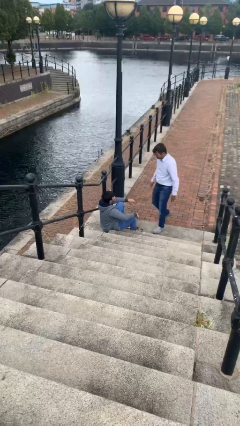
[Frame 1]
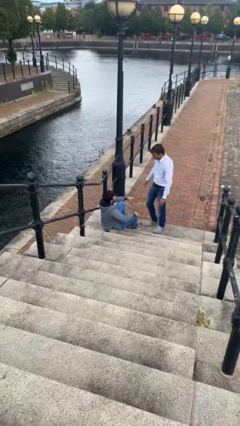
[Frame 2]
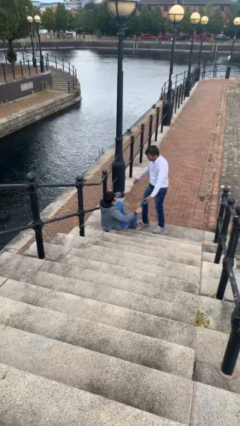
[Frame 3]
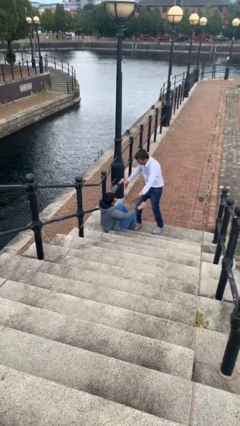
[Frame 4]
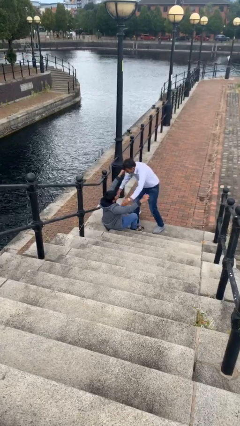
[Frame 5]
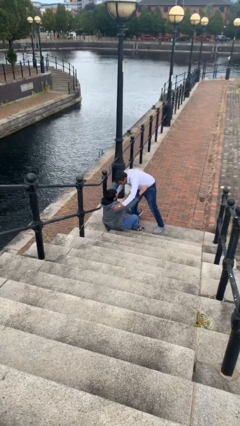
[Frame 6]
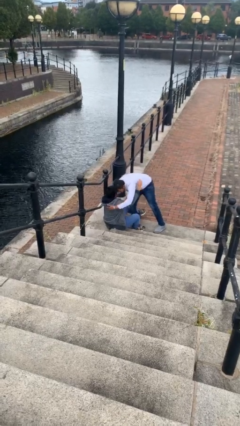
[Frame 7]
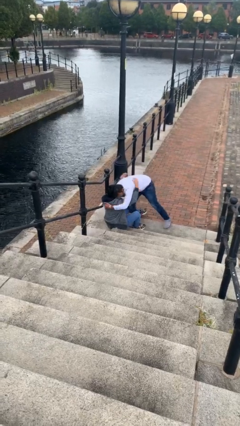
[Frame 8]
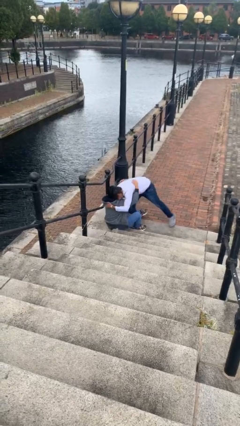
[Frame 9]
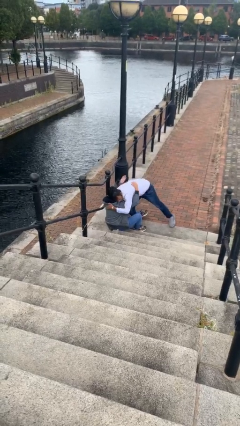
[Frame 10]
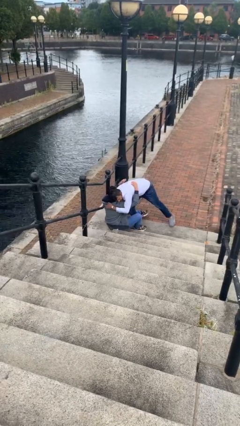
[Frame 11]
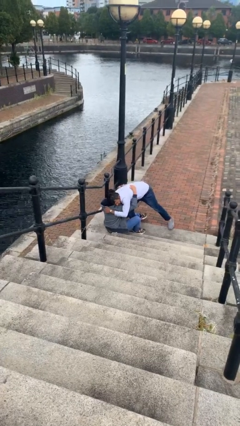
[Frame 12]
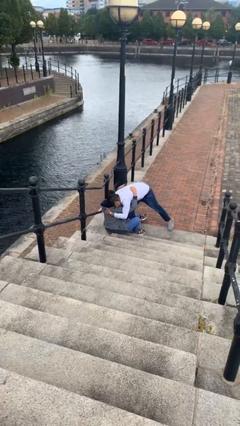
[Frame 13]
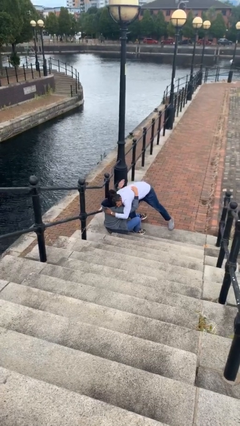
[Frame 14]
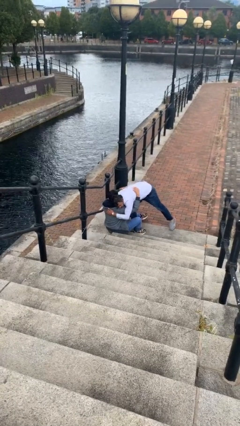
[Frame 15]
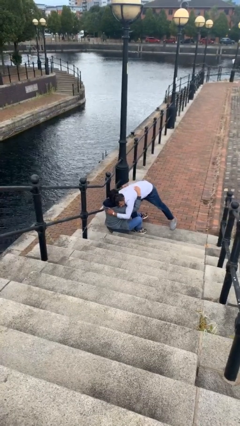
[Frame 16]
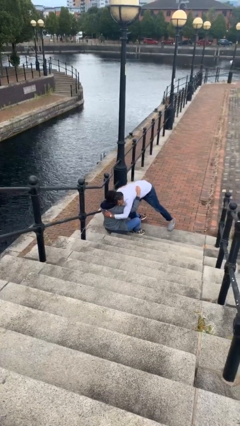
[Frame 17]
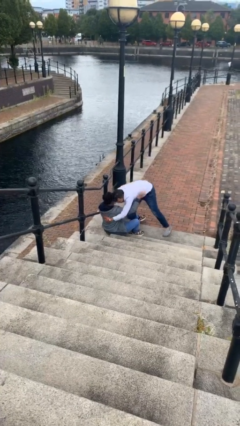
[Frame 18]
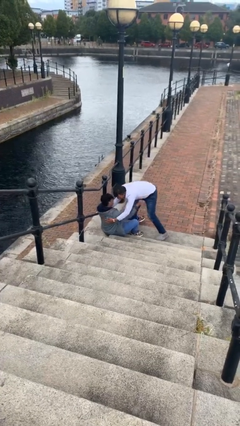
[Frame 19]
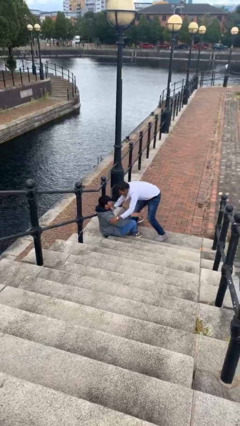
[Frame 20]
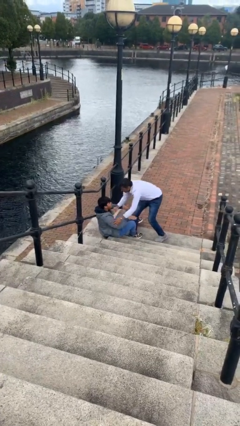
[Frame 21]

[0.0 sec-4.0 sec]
person embraces person

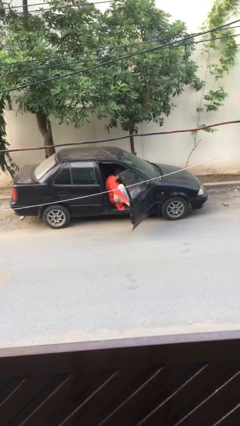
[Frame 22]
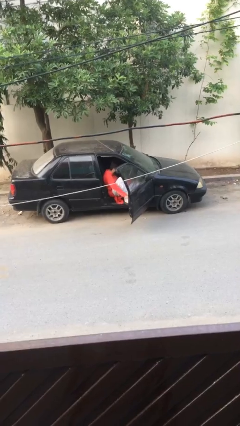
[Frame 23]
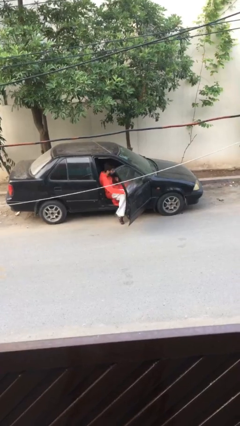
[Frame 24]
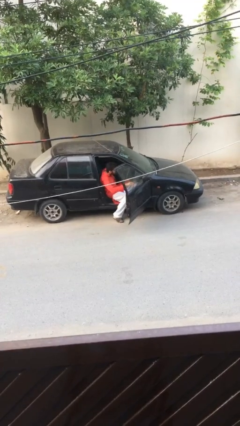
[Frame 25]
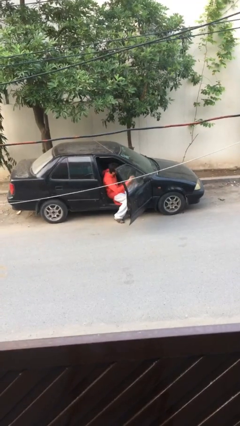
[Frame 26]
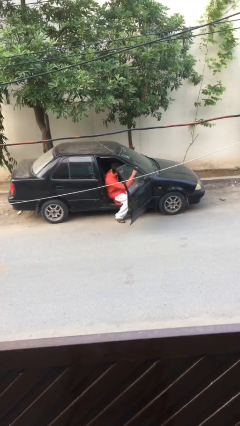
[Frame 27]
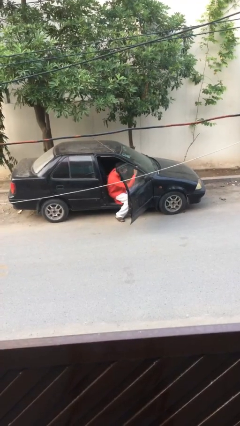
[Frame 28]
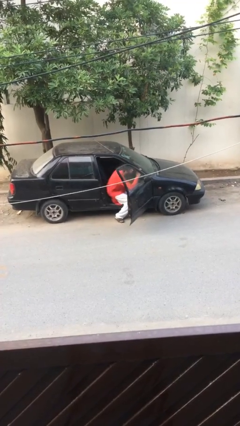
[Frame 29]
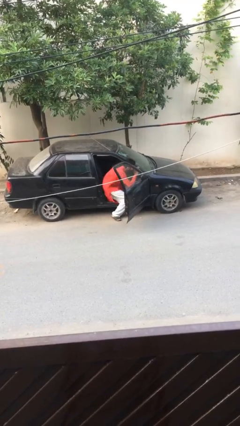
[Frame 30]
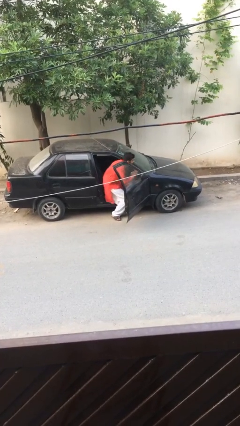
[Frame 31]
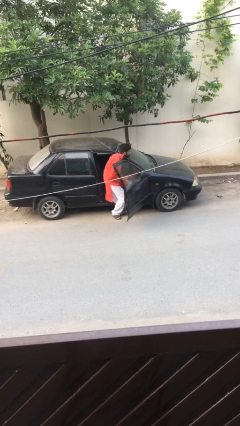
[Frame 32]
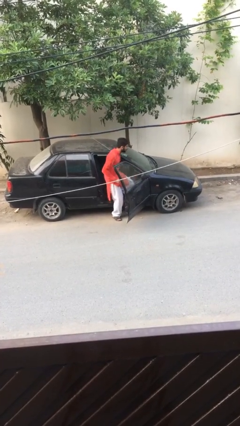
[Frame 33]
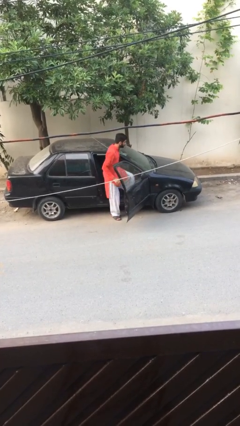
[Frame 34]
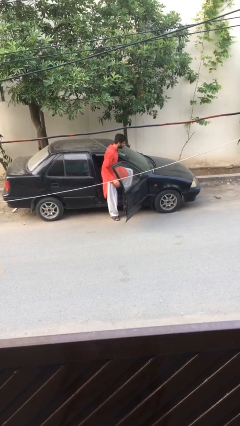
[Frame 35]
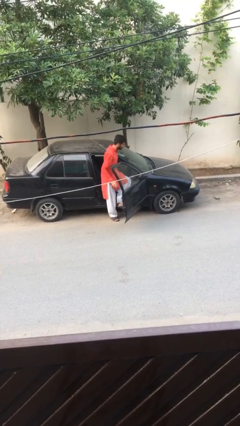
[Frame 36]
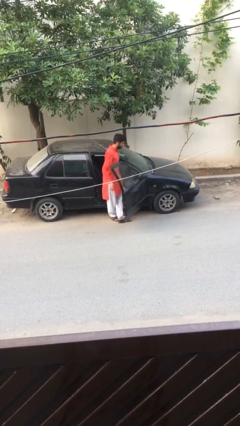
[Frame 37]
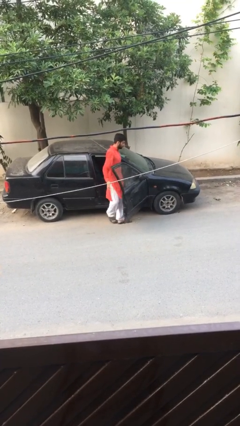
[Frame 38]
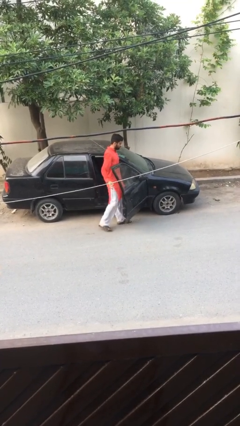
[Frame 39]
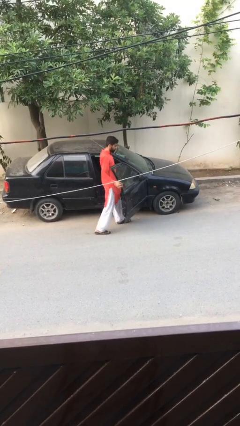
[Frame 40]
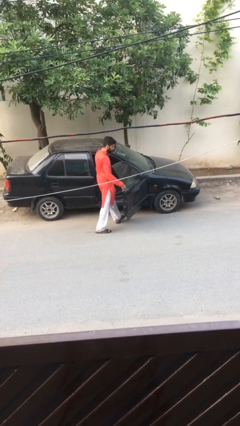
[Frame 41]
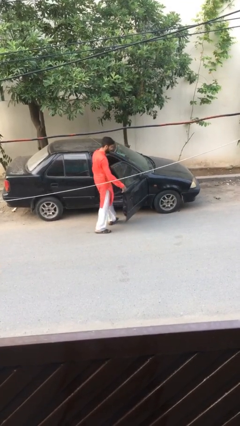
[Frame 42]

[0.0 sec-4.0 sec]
person exits car

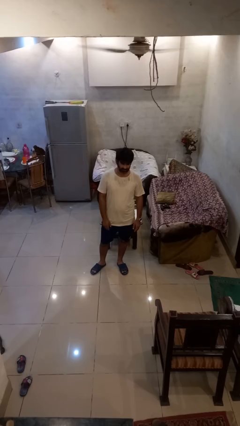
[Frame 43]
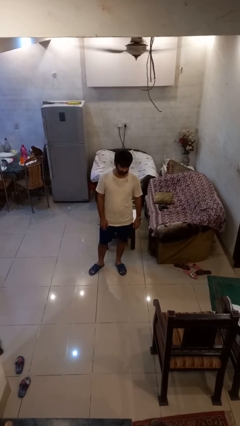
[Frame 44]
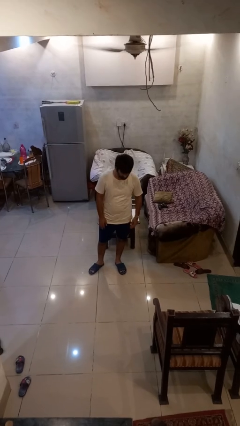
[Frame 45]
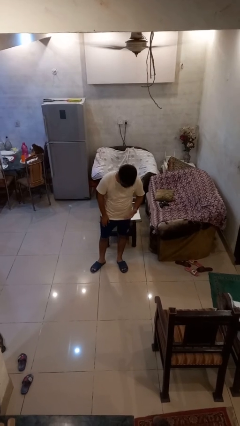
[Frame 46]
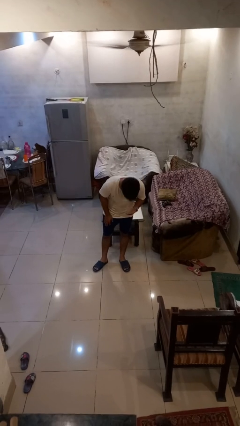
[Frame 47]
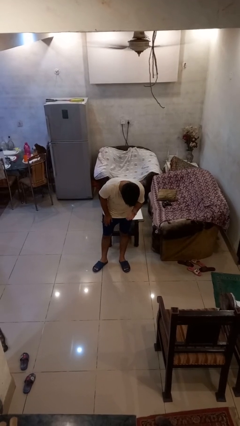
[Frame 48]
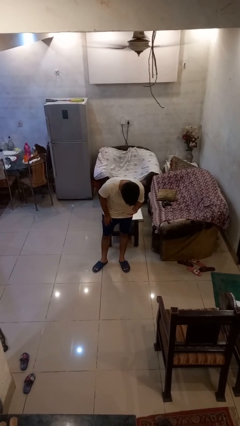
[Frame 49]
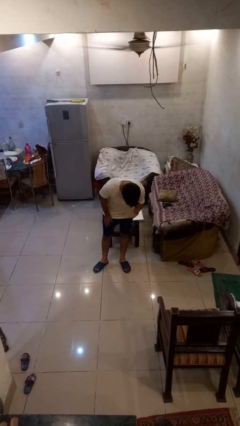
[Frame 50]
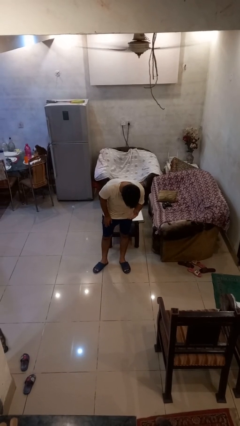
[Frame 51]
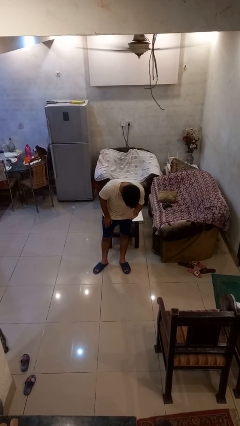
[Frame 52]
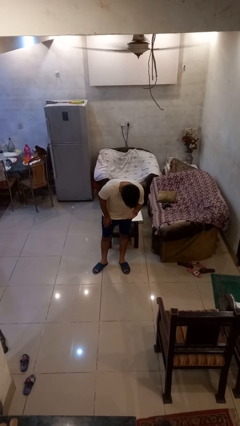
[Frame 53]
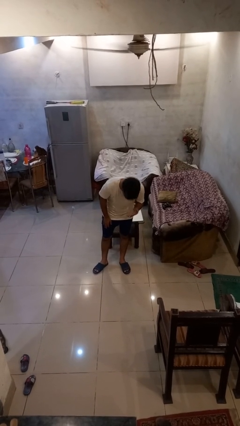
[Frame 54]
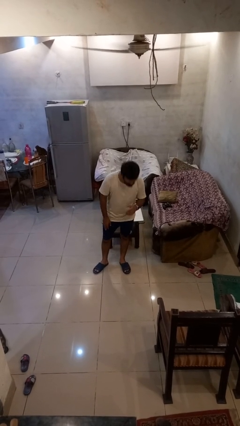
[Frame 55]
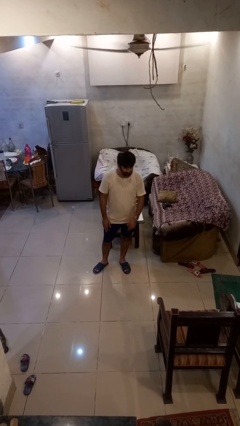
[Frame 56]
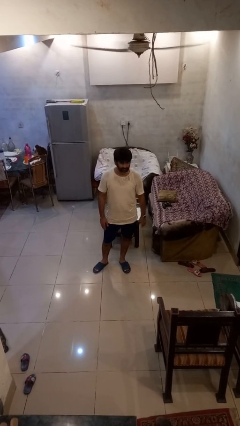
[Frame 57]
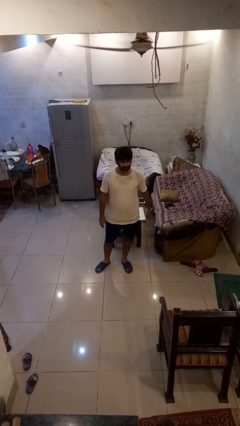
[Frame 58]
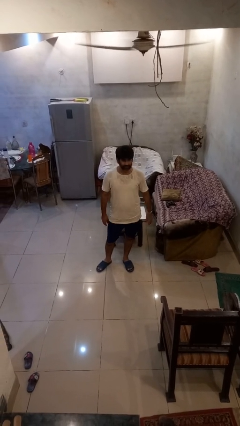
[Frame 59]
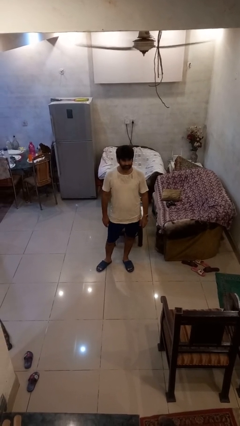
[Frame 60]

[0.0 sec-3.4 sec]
person bows

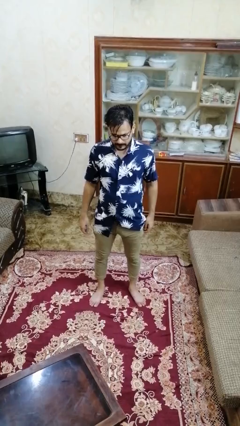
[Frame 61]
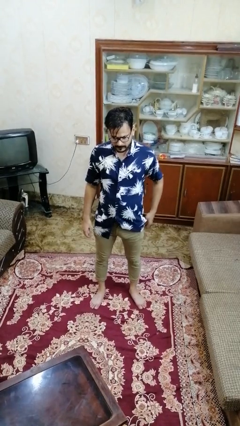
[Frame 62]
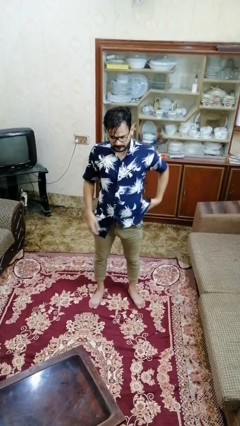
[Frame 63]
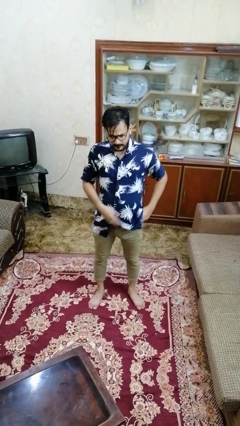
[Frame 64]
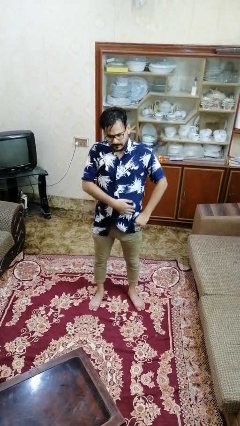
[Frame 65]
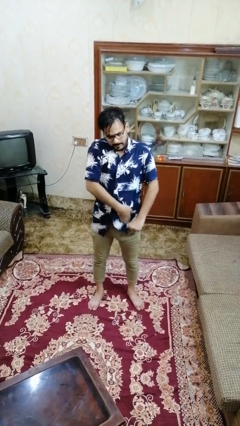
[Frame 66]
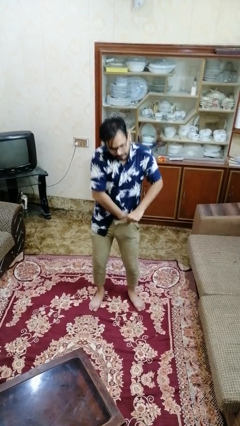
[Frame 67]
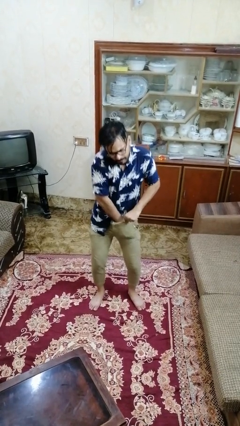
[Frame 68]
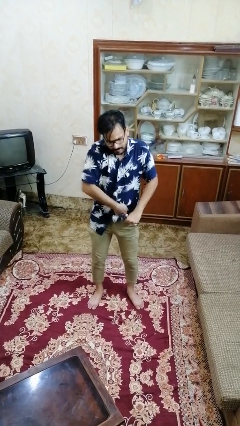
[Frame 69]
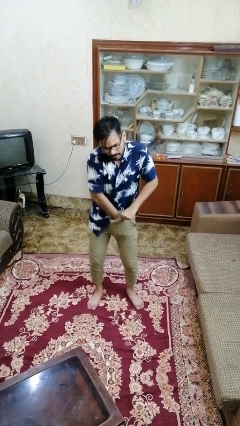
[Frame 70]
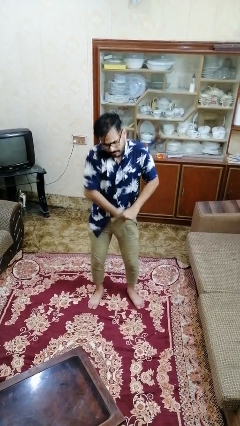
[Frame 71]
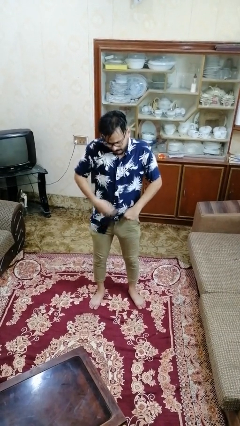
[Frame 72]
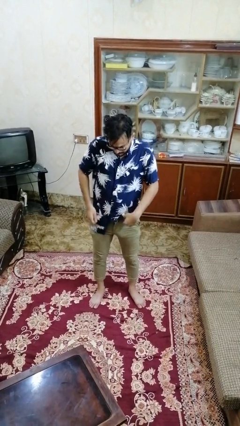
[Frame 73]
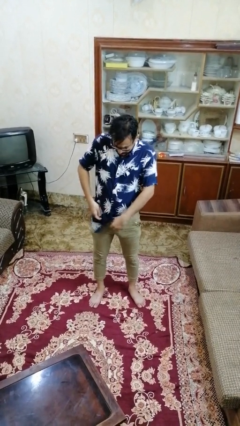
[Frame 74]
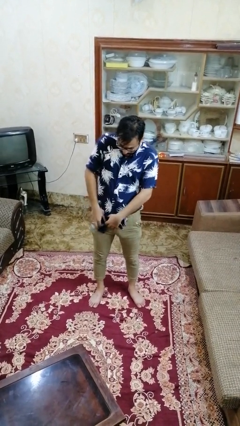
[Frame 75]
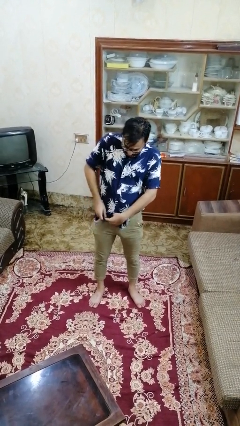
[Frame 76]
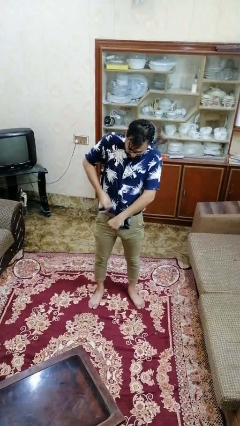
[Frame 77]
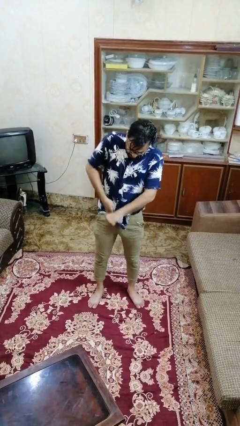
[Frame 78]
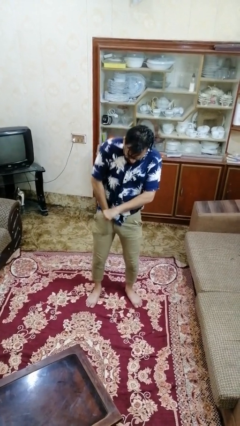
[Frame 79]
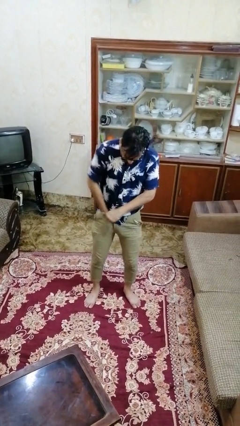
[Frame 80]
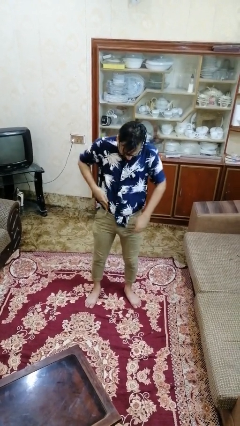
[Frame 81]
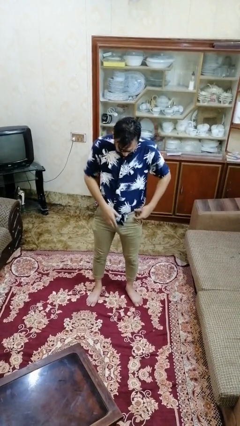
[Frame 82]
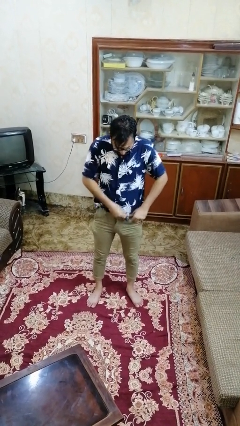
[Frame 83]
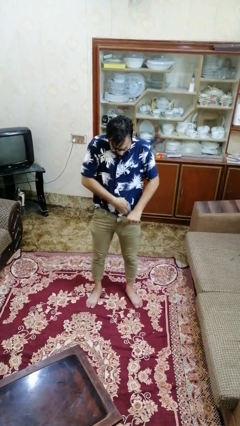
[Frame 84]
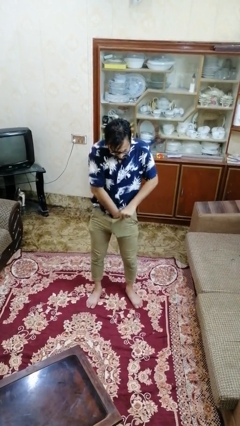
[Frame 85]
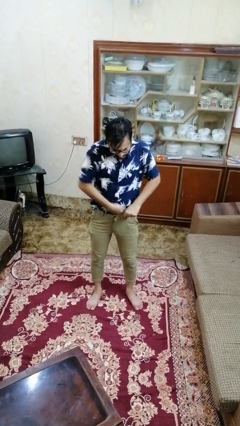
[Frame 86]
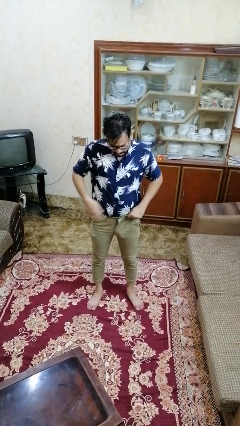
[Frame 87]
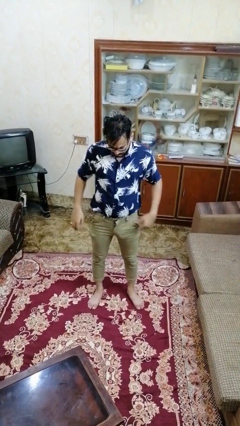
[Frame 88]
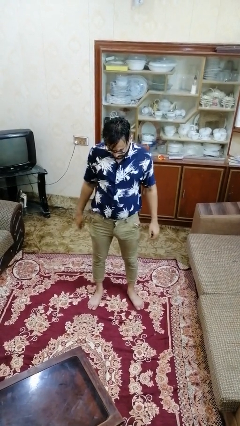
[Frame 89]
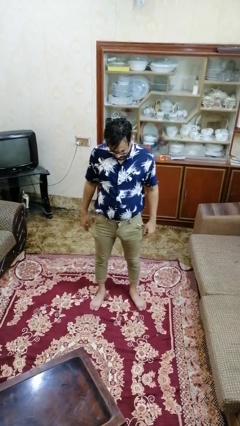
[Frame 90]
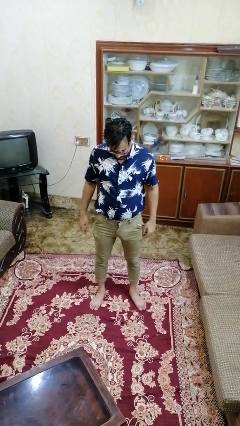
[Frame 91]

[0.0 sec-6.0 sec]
person tucks in shirt

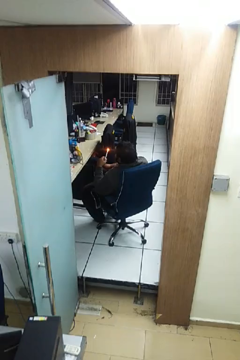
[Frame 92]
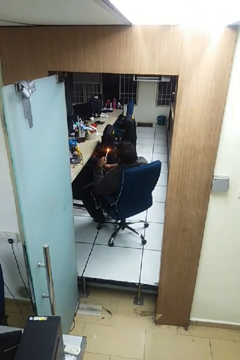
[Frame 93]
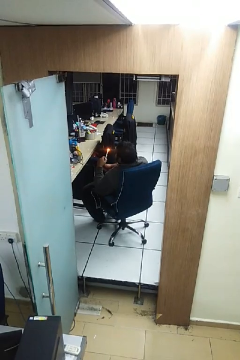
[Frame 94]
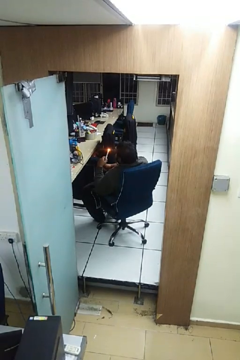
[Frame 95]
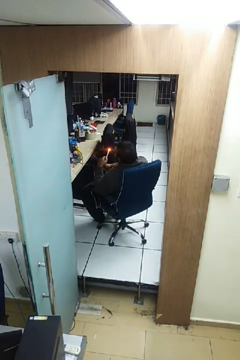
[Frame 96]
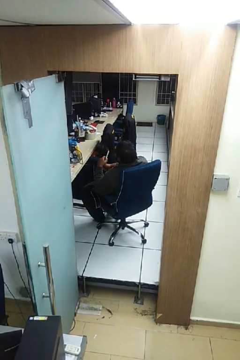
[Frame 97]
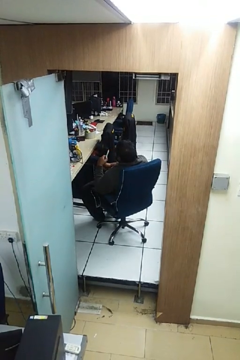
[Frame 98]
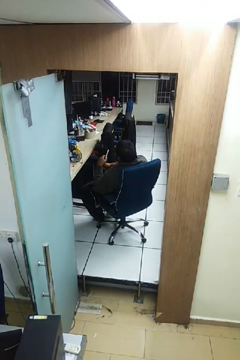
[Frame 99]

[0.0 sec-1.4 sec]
person extinguishes candle
